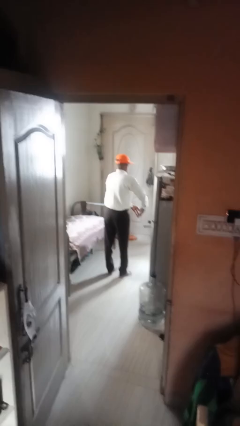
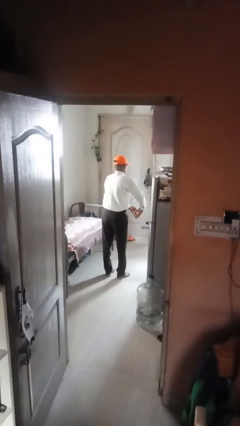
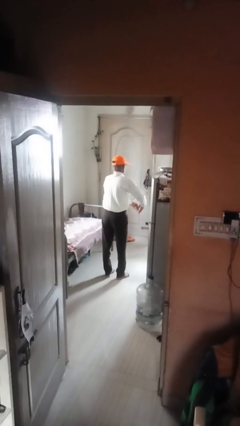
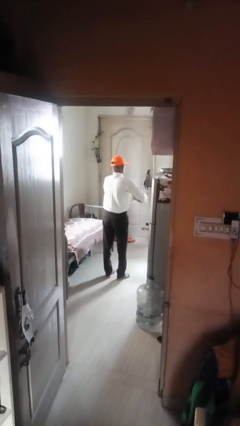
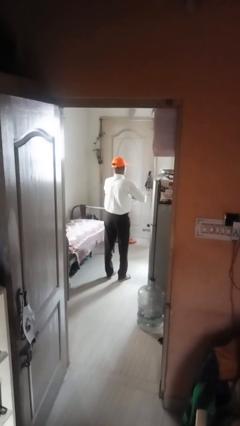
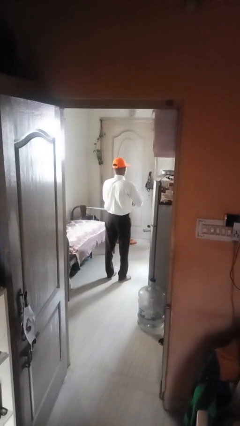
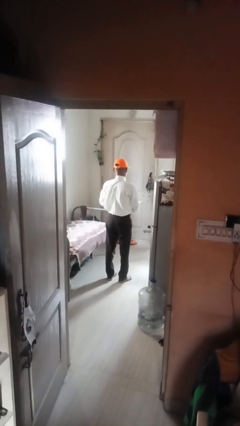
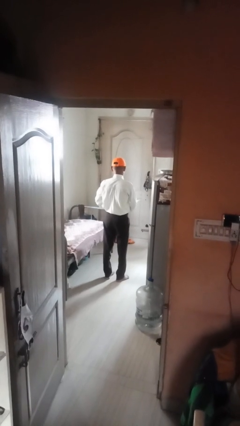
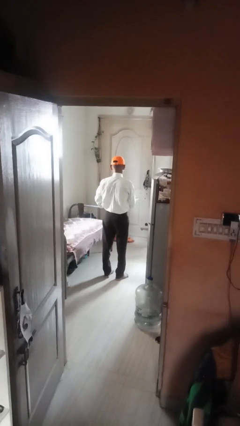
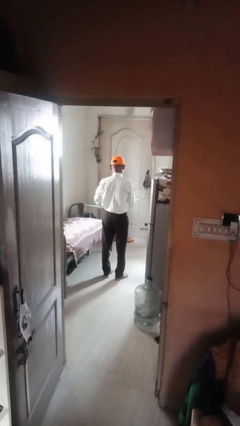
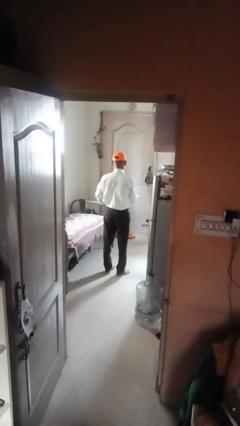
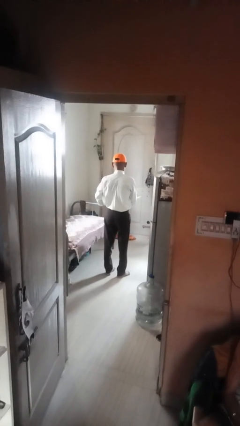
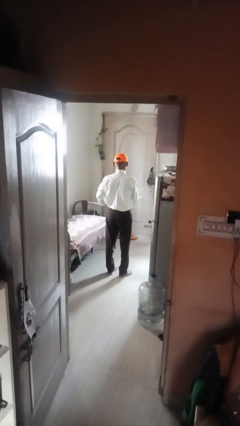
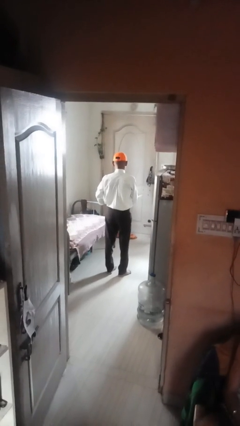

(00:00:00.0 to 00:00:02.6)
person gestures heart

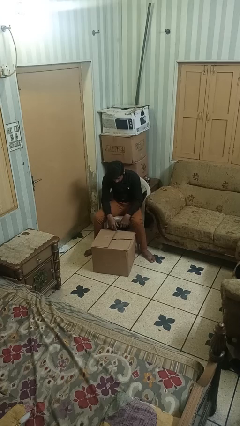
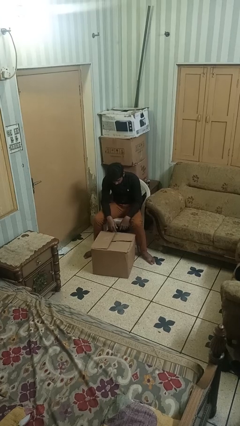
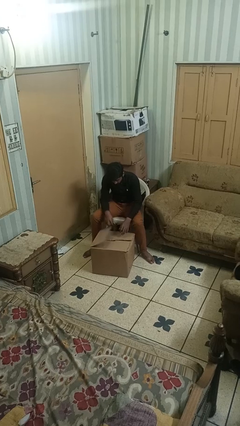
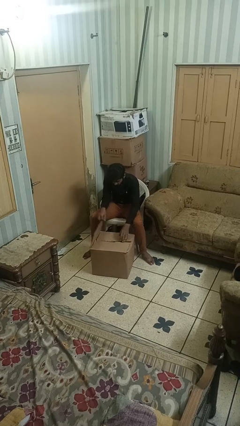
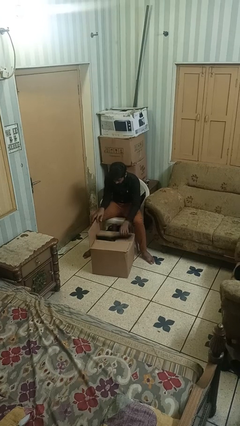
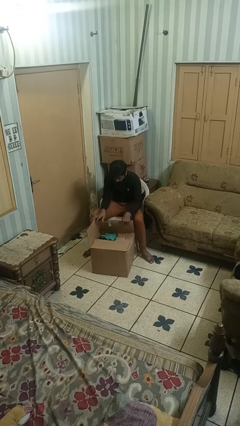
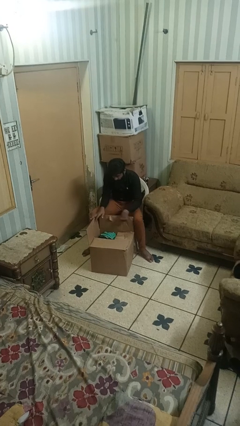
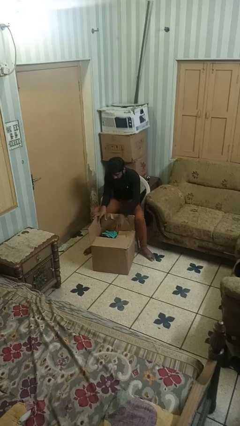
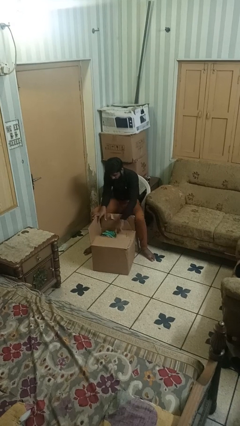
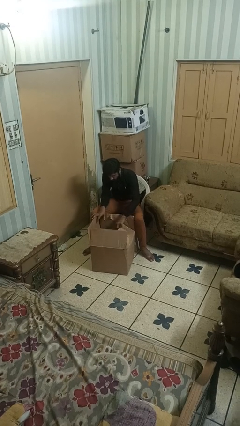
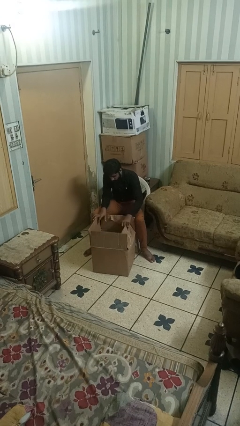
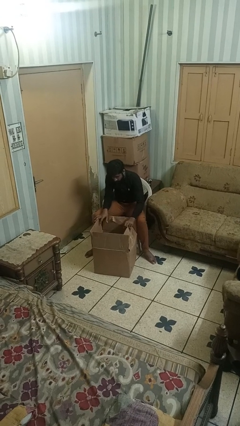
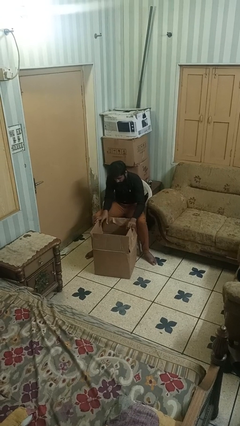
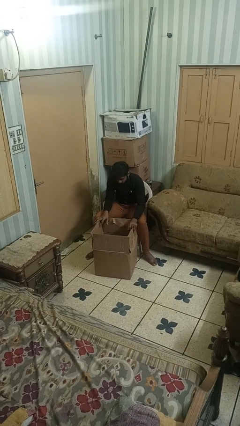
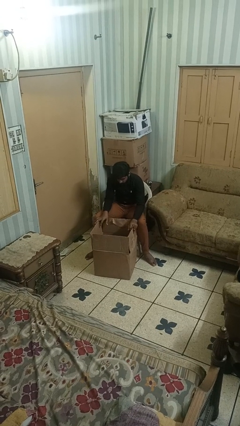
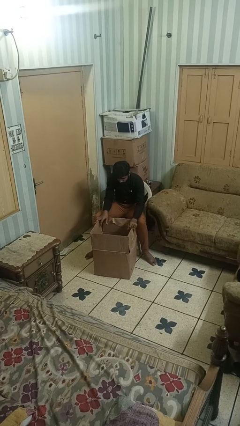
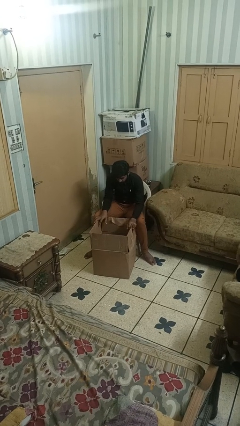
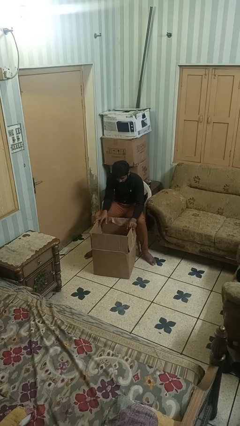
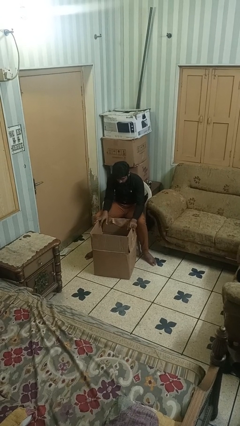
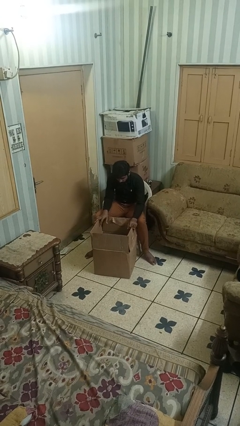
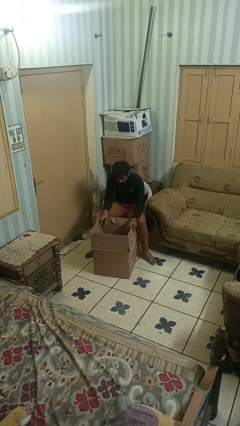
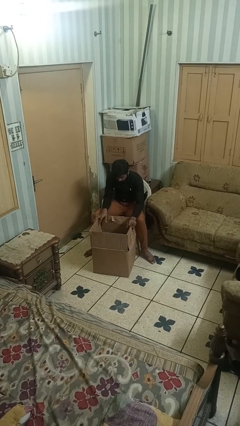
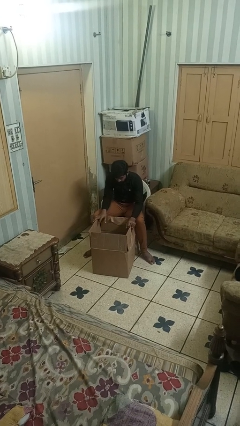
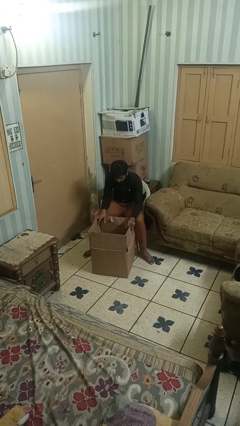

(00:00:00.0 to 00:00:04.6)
person opens box

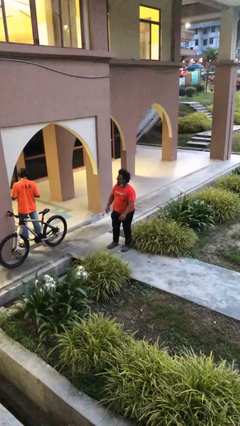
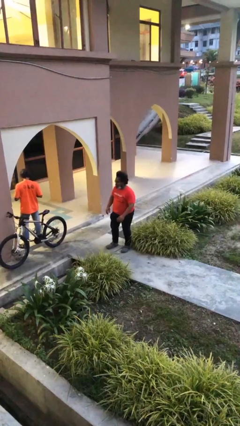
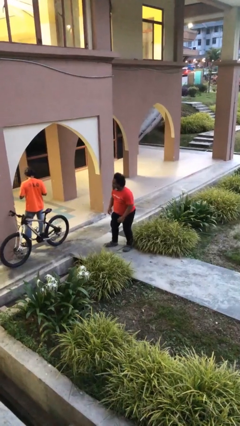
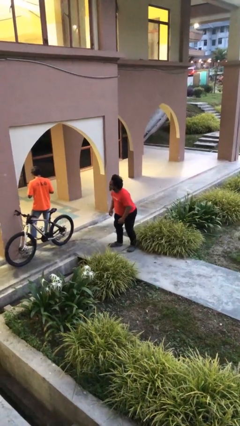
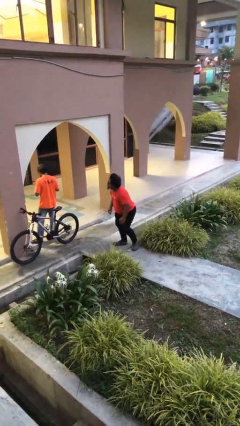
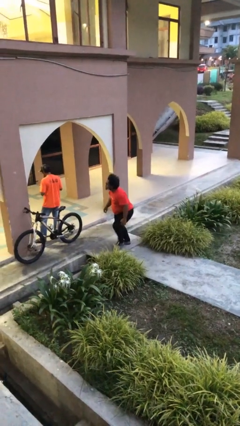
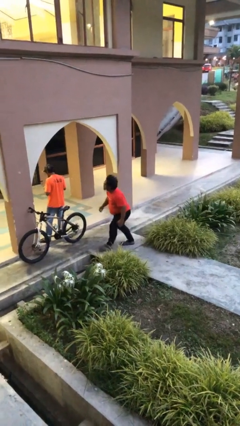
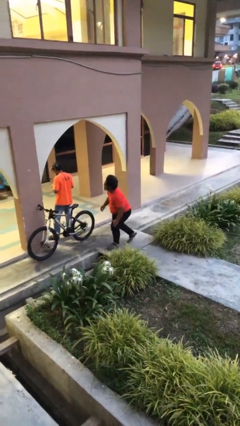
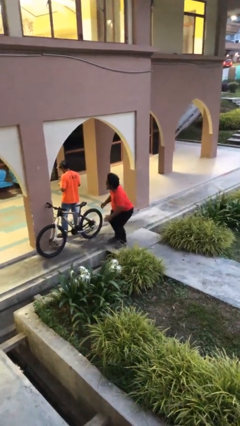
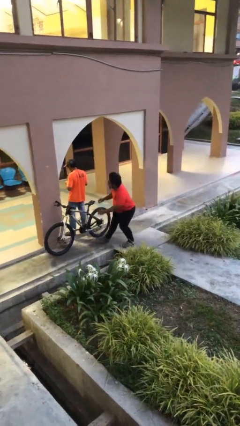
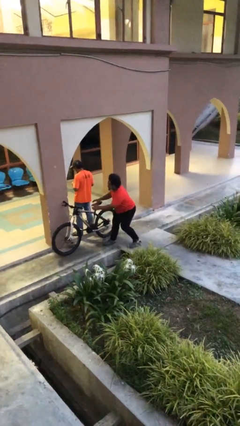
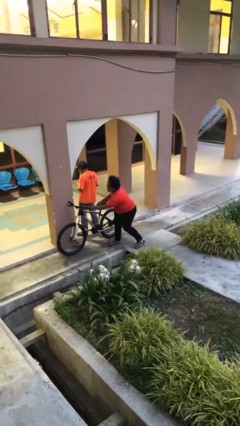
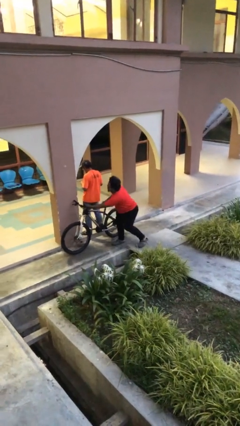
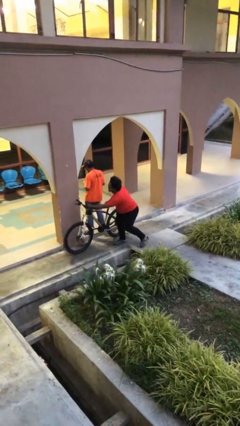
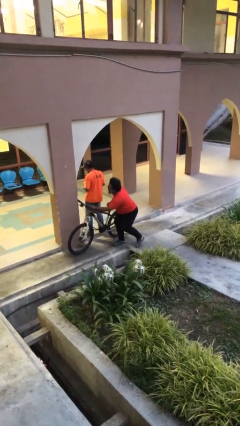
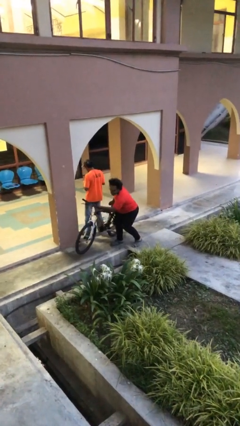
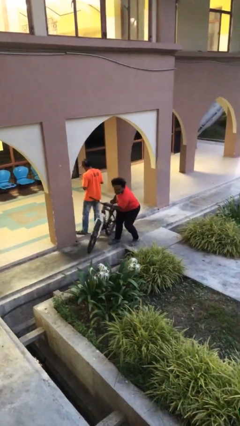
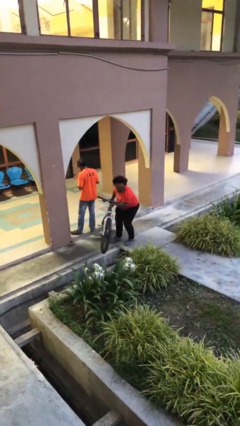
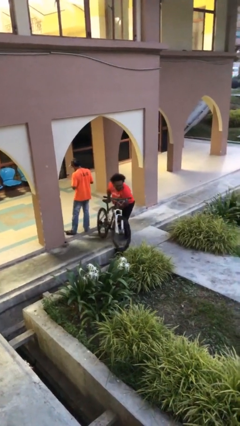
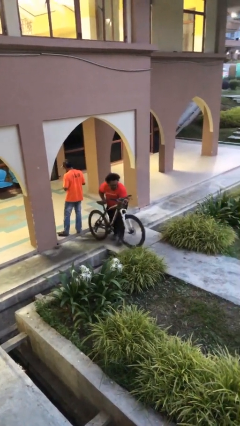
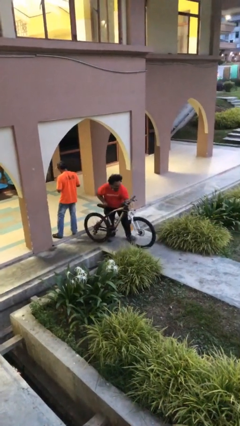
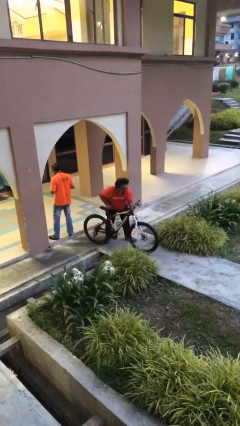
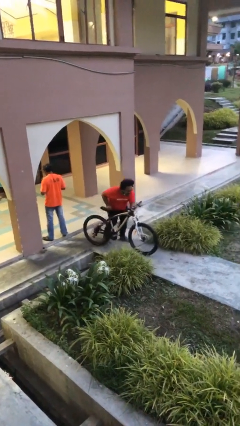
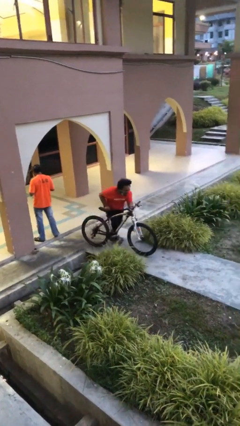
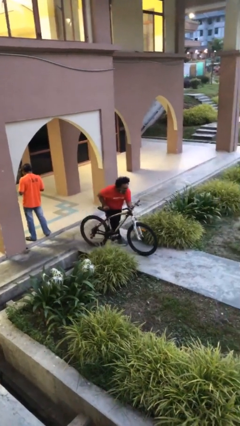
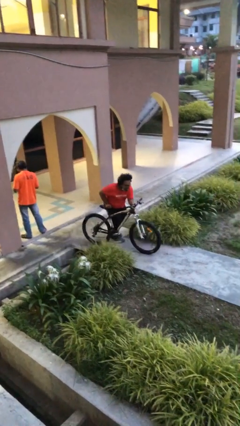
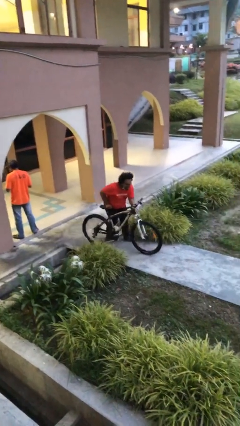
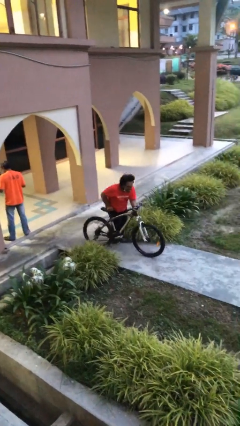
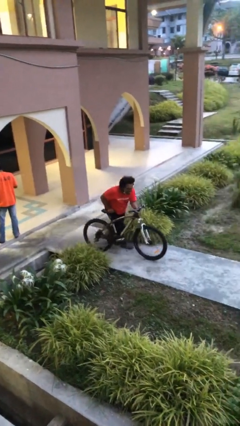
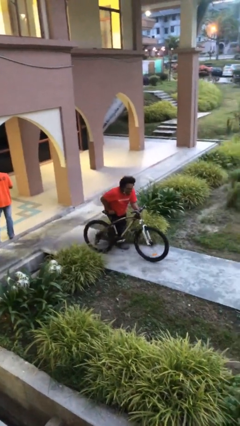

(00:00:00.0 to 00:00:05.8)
person steals object from person

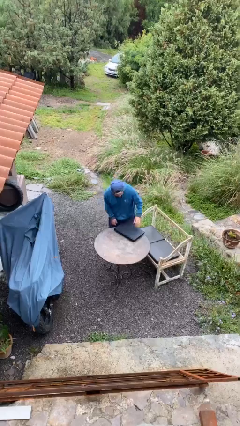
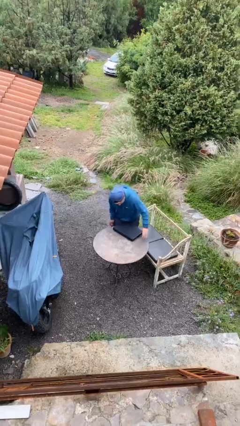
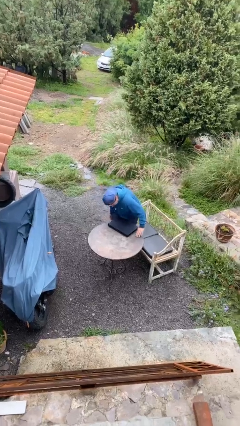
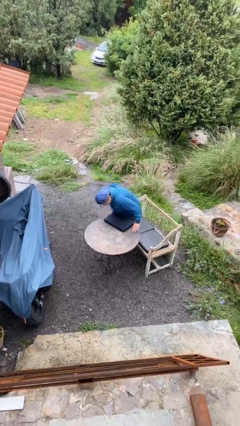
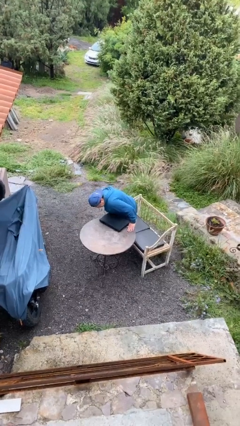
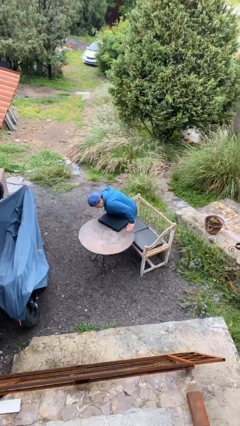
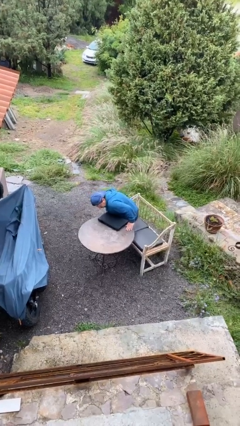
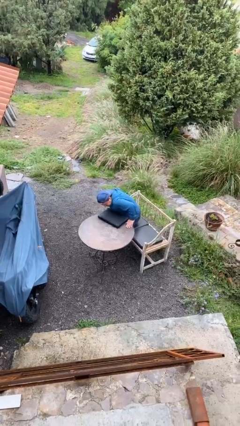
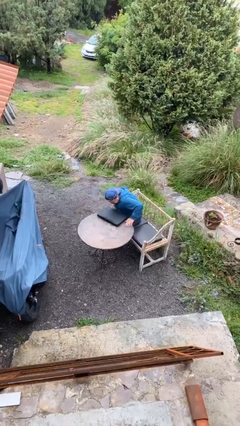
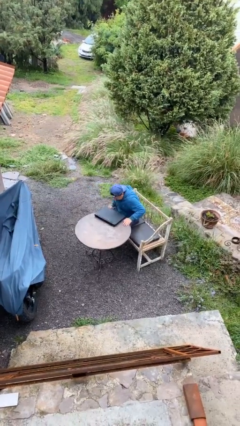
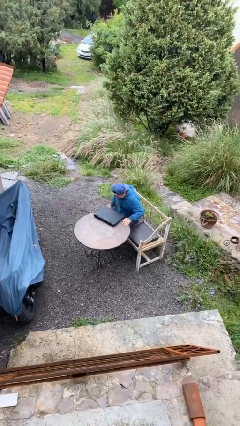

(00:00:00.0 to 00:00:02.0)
person sits down

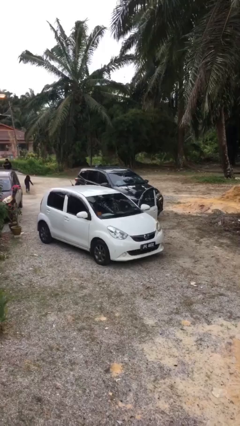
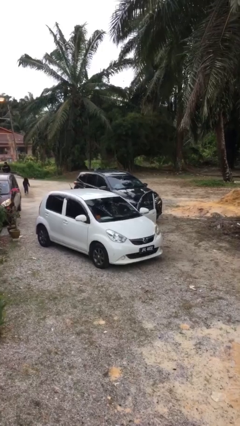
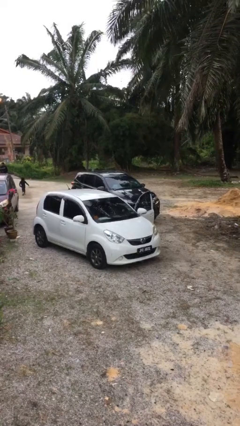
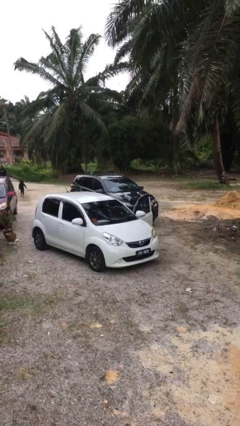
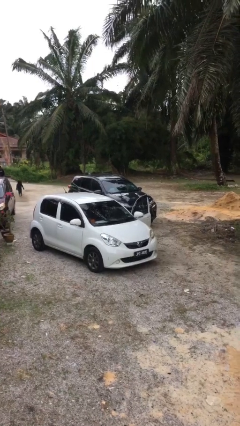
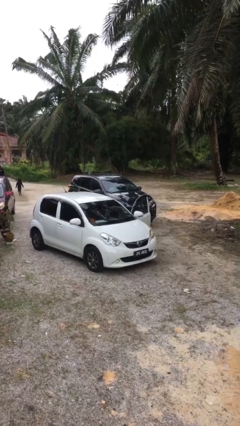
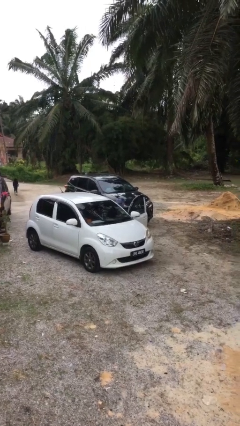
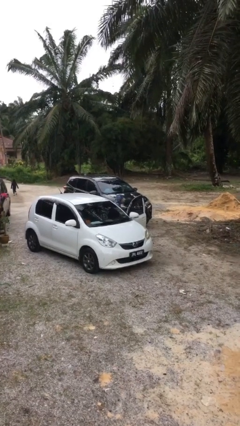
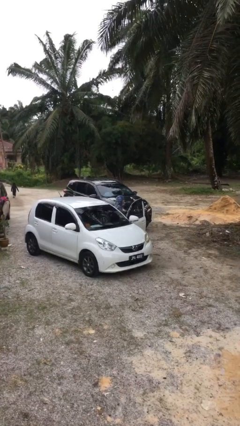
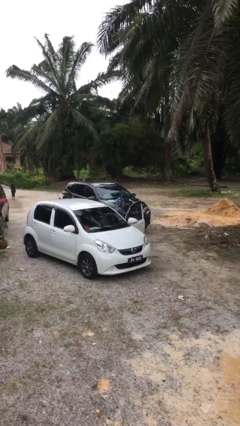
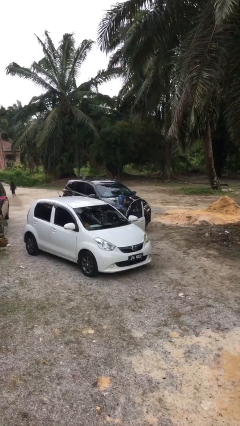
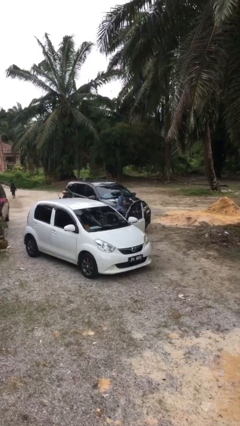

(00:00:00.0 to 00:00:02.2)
person exits car

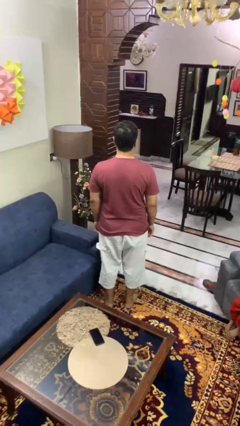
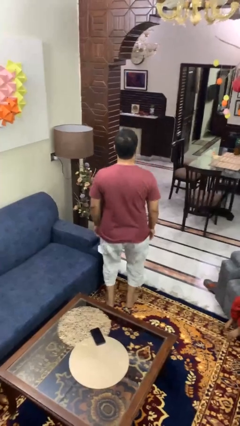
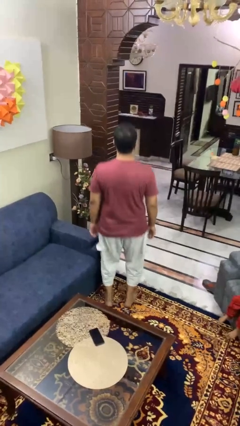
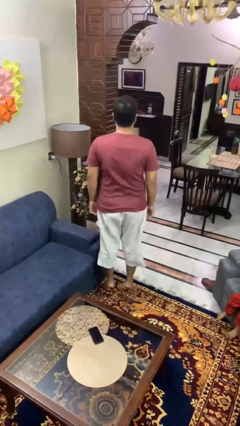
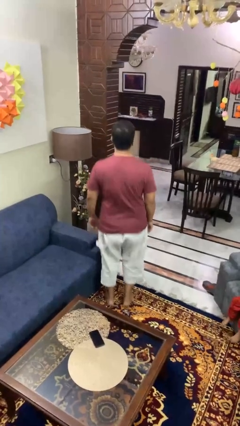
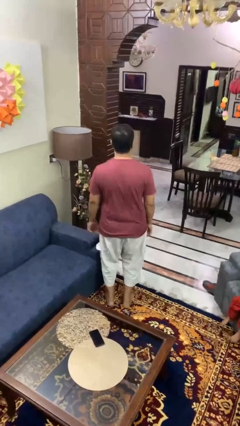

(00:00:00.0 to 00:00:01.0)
person jumps
